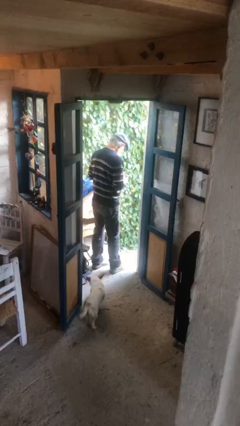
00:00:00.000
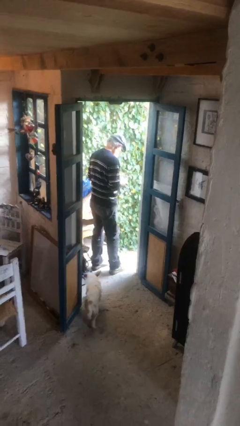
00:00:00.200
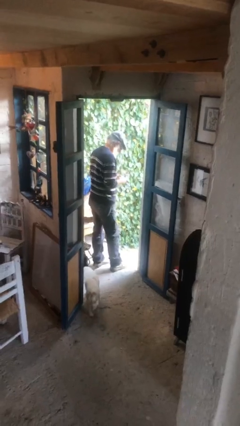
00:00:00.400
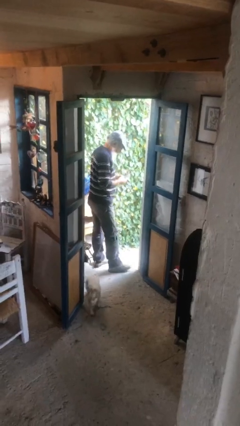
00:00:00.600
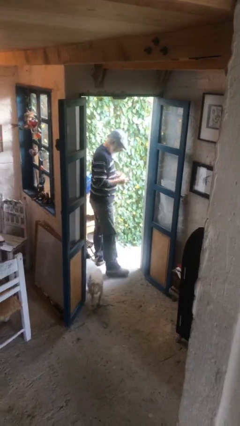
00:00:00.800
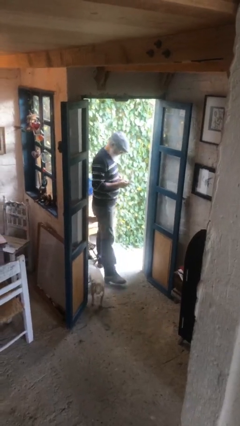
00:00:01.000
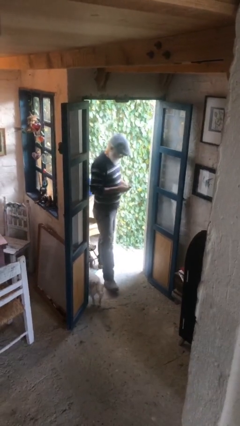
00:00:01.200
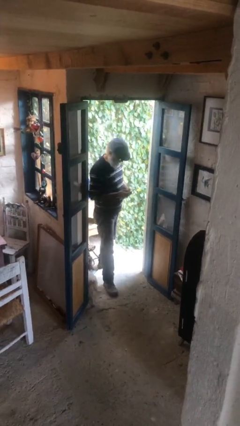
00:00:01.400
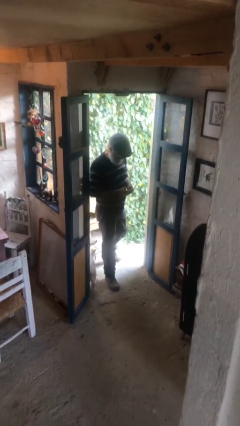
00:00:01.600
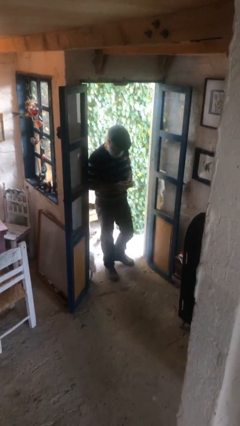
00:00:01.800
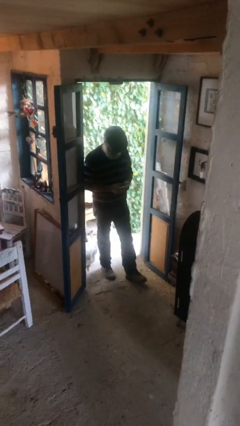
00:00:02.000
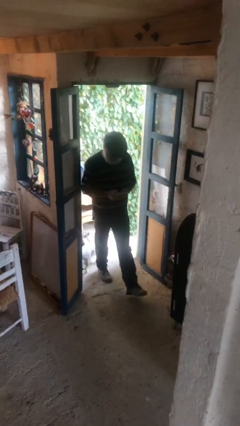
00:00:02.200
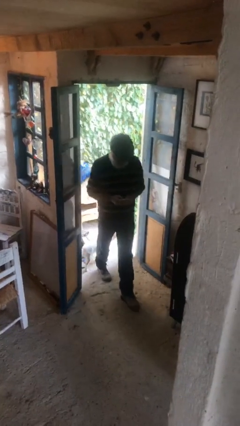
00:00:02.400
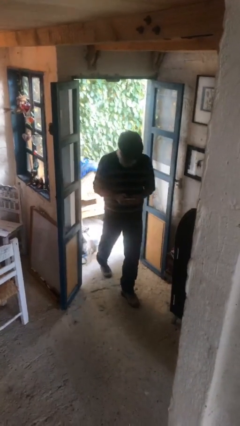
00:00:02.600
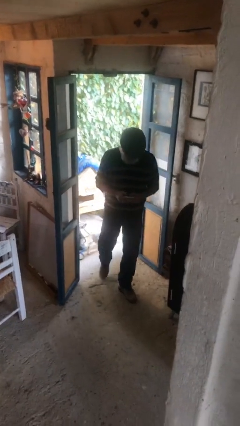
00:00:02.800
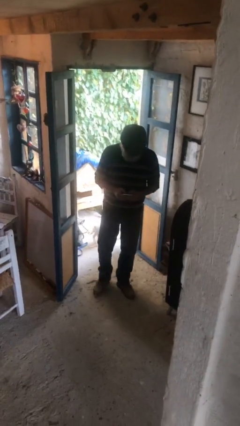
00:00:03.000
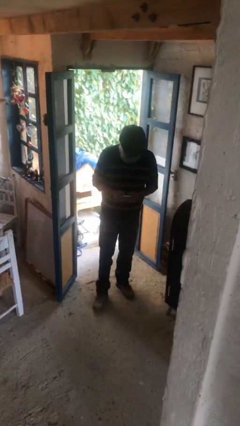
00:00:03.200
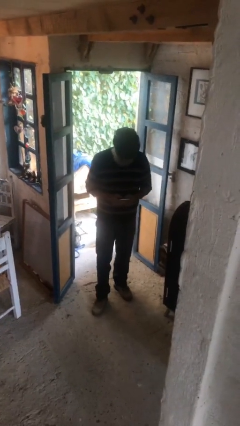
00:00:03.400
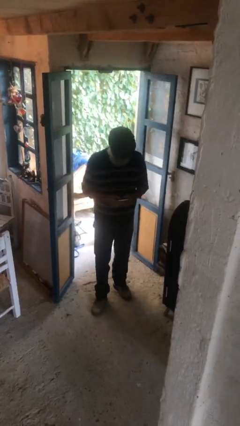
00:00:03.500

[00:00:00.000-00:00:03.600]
person enters scene through structure

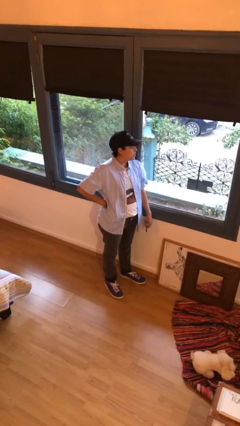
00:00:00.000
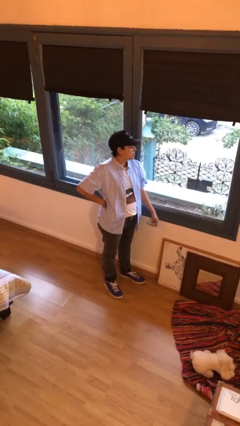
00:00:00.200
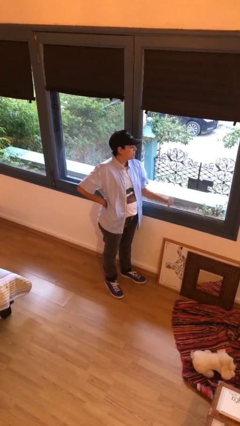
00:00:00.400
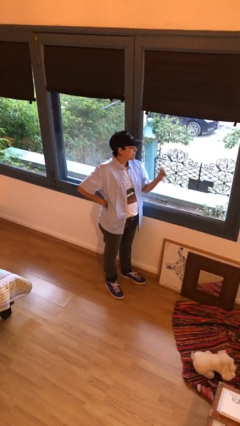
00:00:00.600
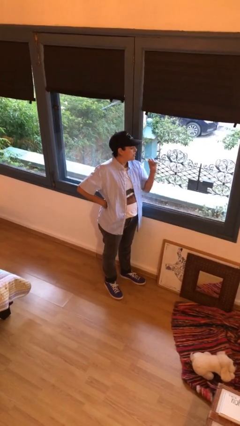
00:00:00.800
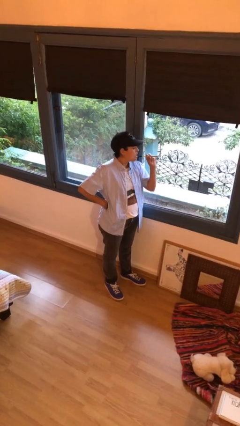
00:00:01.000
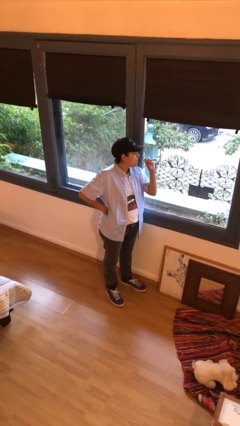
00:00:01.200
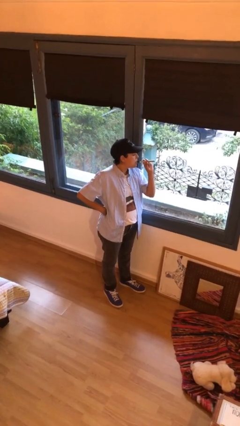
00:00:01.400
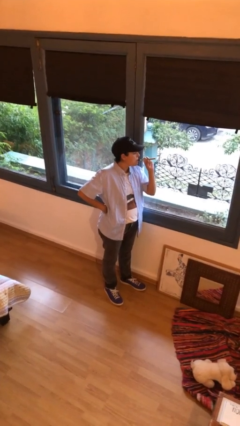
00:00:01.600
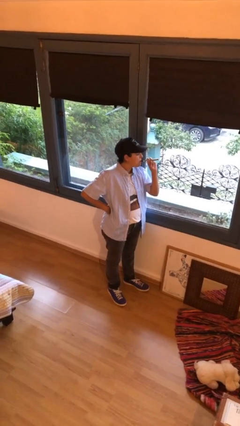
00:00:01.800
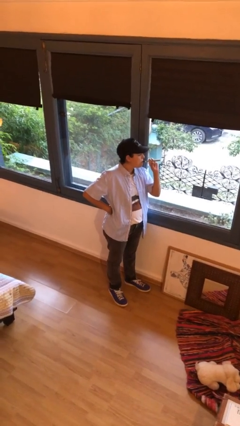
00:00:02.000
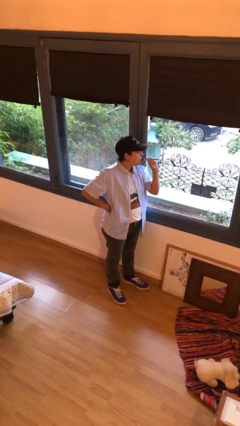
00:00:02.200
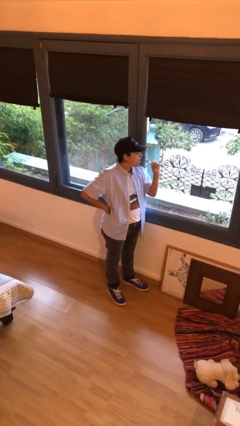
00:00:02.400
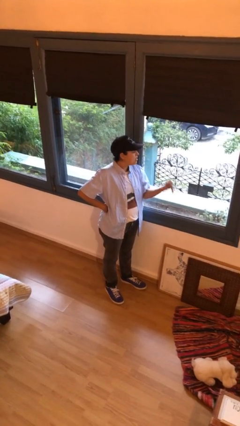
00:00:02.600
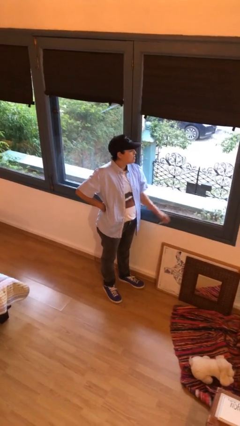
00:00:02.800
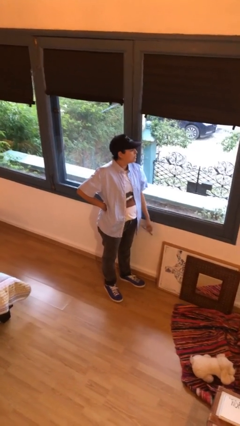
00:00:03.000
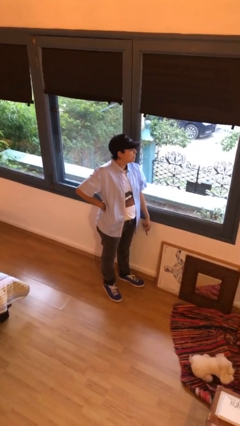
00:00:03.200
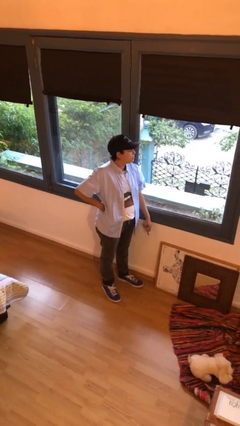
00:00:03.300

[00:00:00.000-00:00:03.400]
person vapes

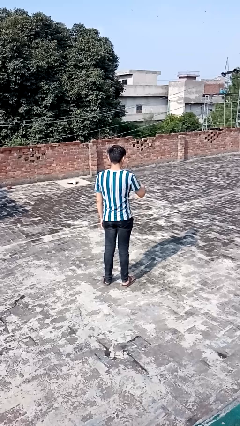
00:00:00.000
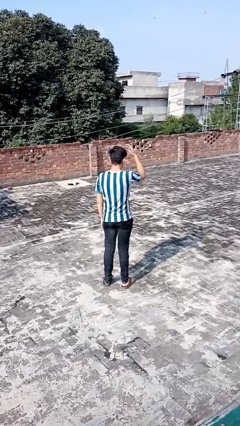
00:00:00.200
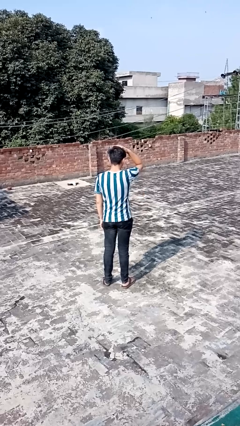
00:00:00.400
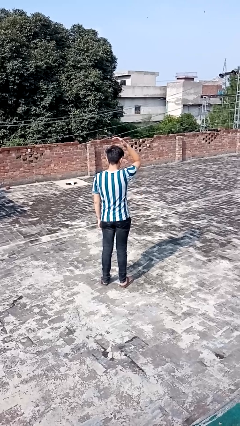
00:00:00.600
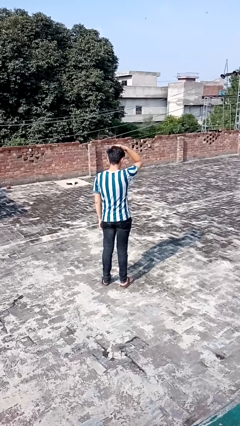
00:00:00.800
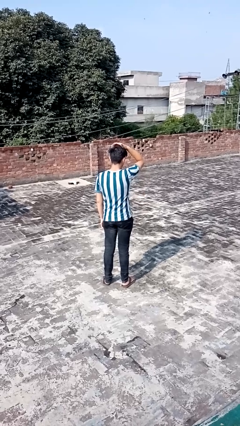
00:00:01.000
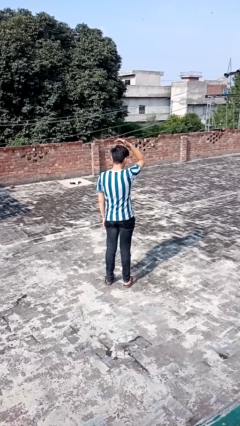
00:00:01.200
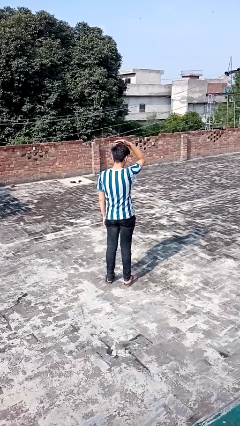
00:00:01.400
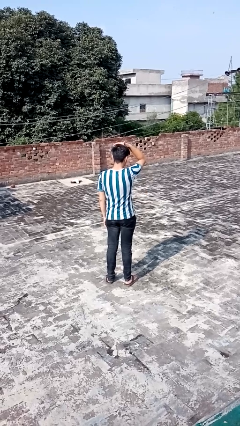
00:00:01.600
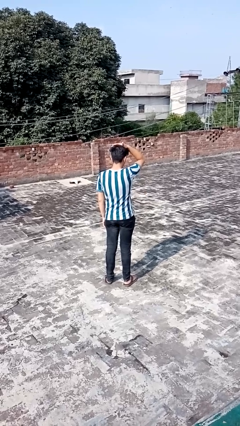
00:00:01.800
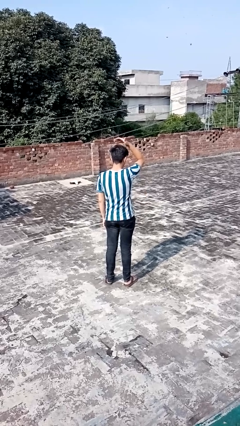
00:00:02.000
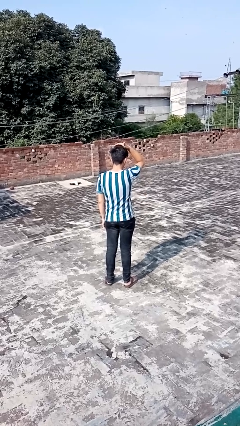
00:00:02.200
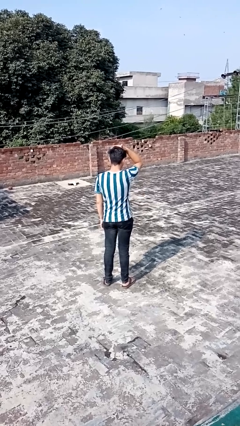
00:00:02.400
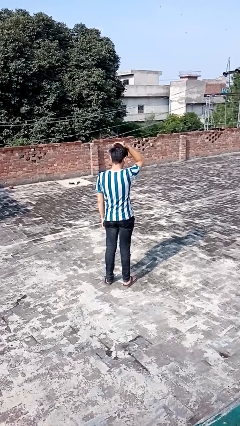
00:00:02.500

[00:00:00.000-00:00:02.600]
person pats head

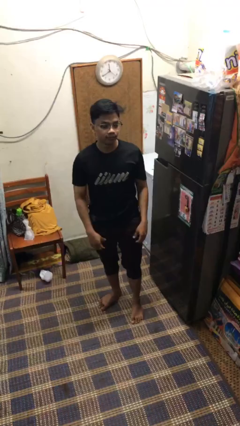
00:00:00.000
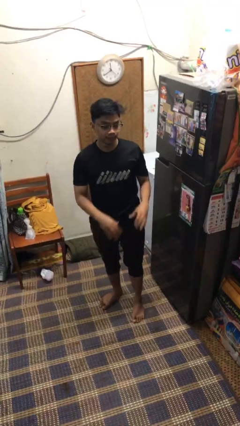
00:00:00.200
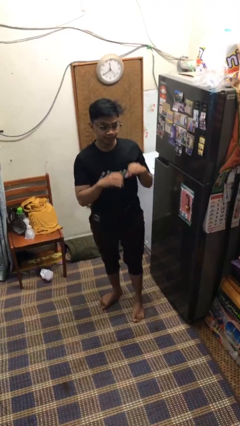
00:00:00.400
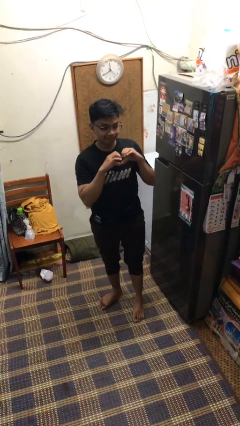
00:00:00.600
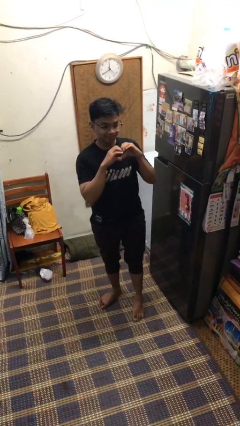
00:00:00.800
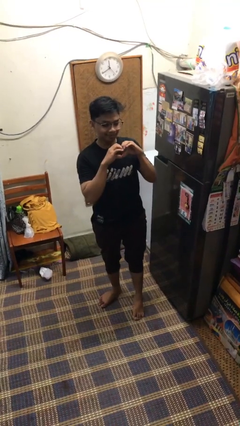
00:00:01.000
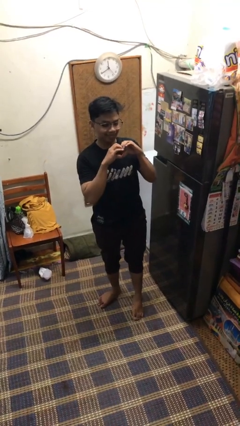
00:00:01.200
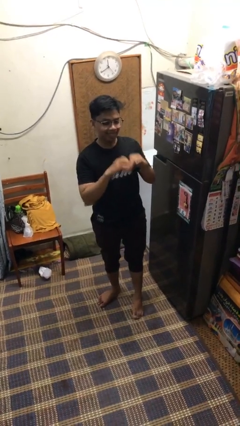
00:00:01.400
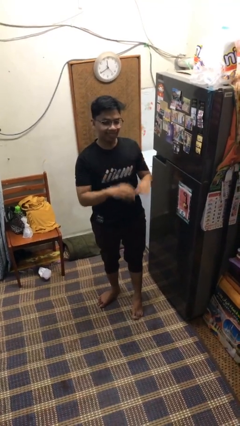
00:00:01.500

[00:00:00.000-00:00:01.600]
person gestures heart

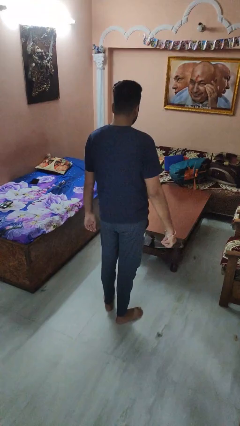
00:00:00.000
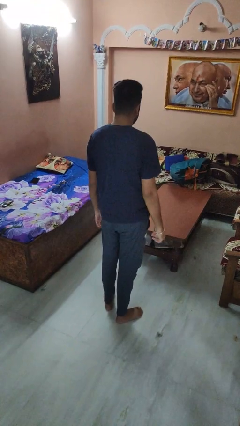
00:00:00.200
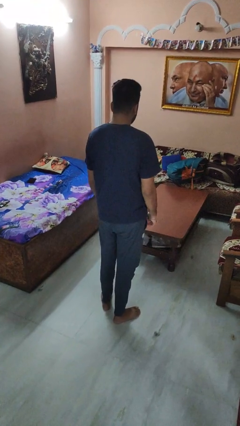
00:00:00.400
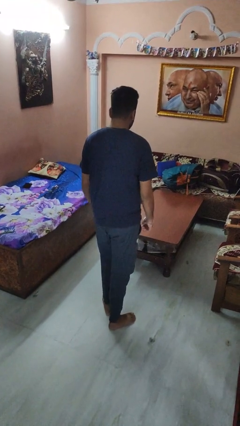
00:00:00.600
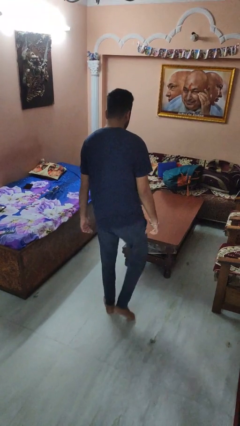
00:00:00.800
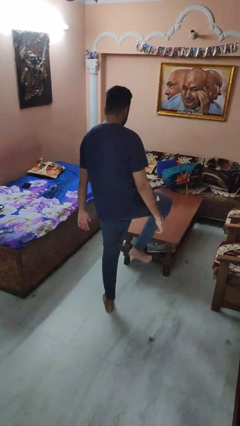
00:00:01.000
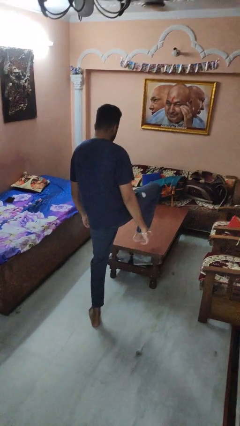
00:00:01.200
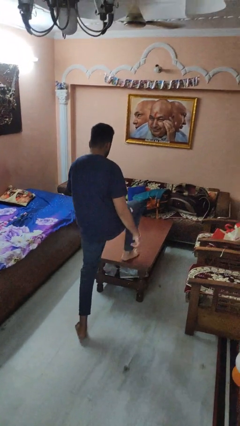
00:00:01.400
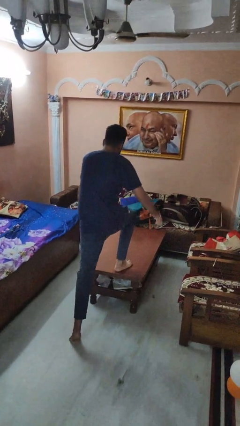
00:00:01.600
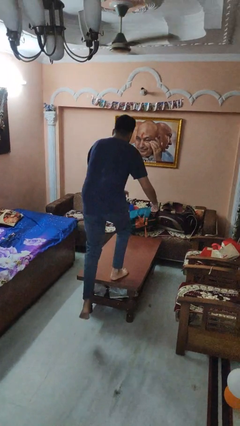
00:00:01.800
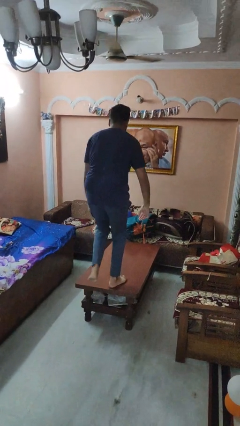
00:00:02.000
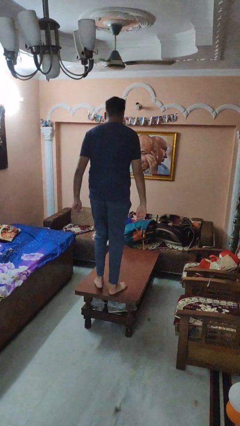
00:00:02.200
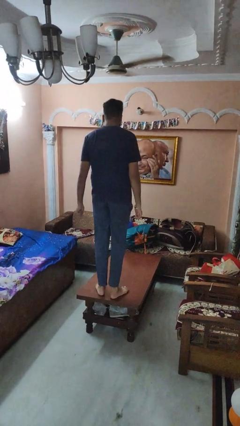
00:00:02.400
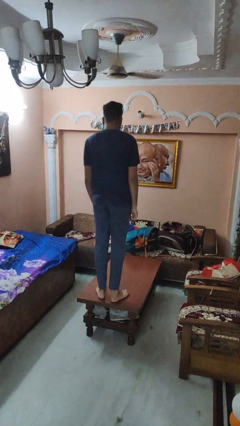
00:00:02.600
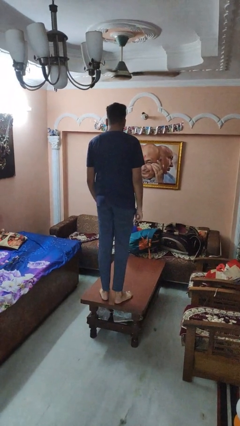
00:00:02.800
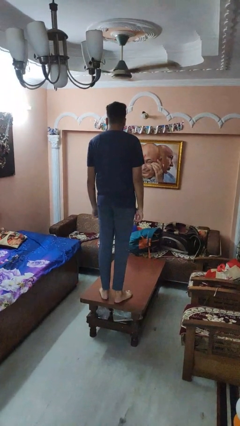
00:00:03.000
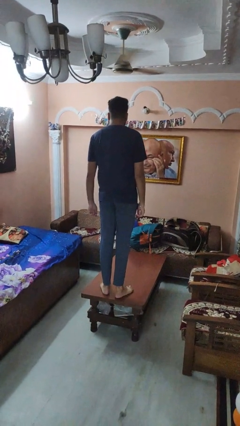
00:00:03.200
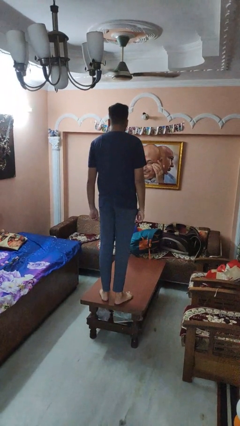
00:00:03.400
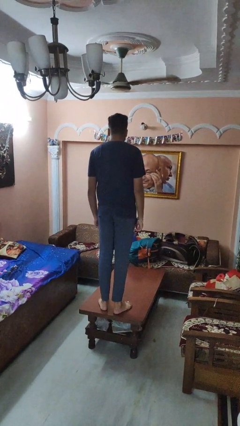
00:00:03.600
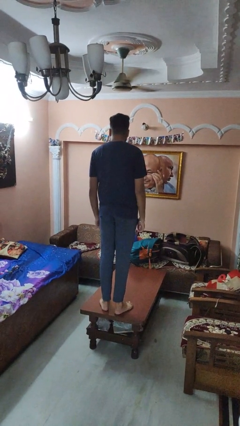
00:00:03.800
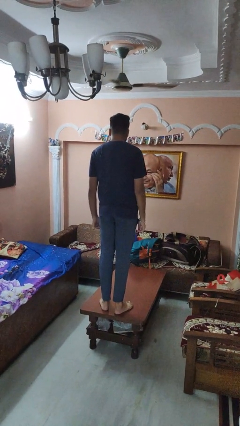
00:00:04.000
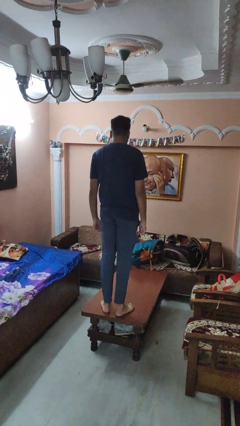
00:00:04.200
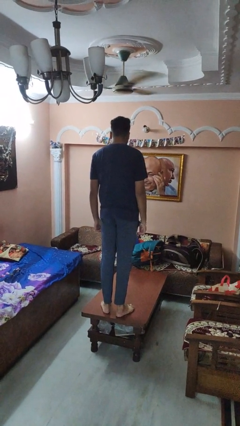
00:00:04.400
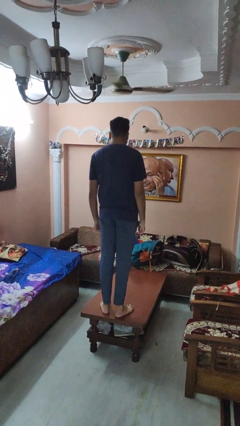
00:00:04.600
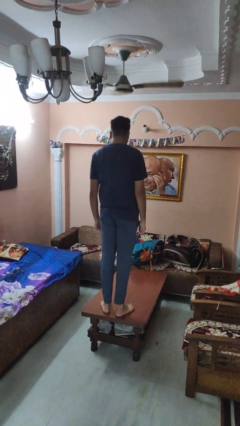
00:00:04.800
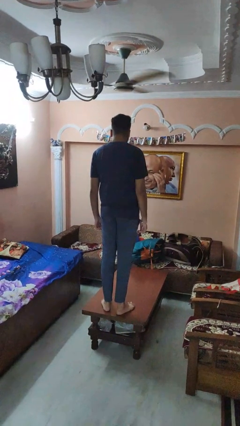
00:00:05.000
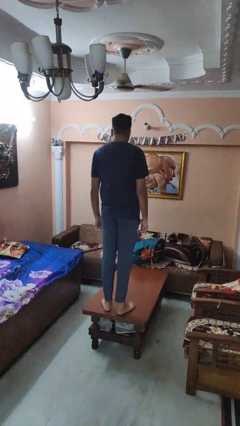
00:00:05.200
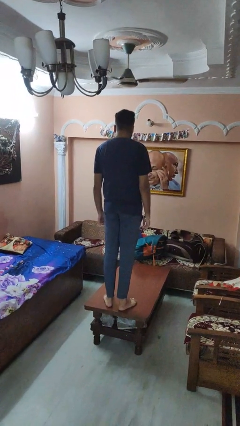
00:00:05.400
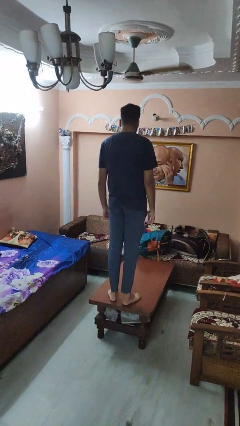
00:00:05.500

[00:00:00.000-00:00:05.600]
person climbs on table

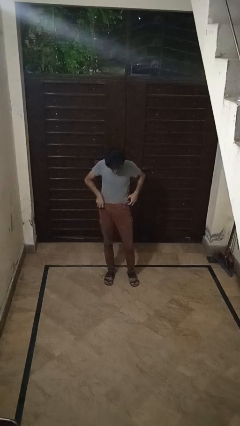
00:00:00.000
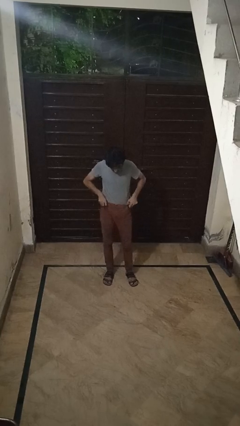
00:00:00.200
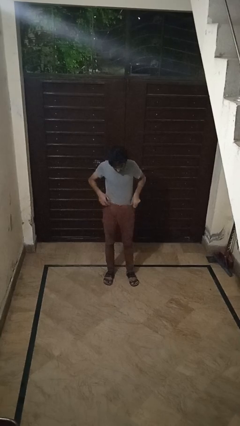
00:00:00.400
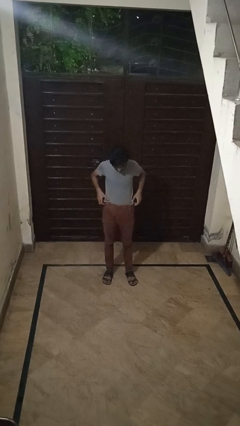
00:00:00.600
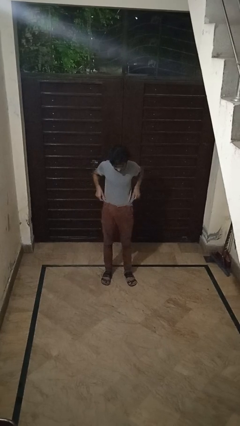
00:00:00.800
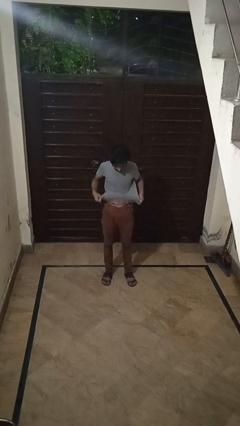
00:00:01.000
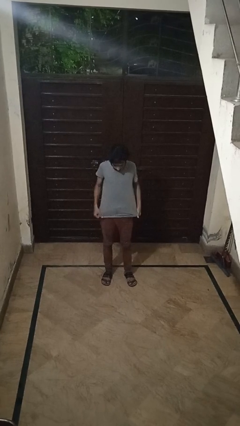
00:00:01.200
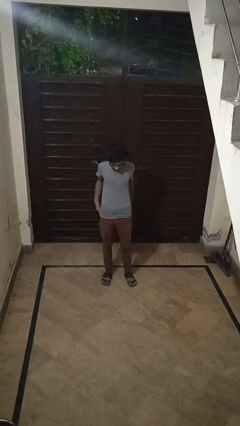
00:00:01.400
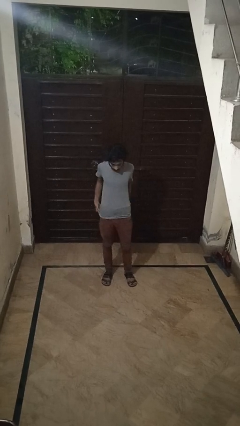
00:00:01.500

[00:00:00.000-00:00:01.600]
person untucks shirt
